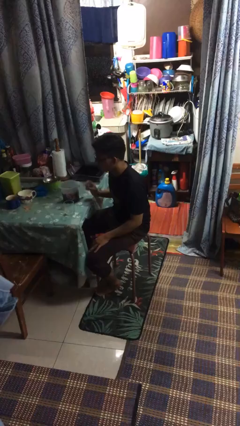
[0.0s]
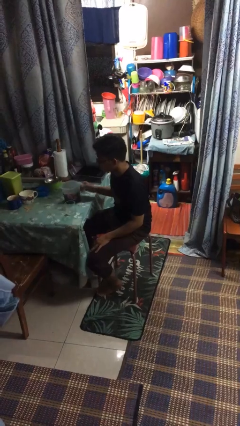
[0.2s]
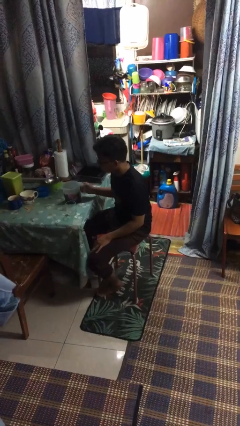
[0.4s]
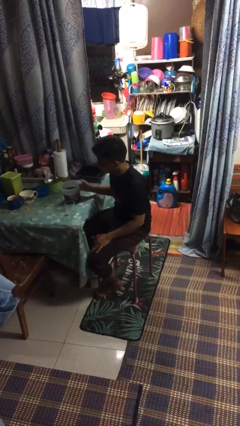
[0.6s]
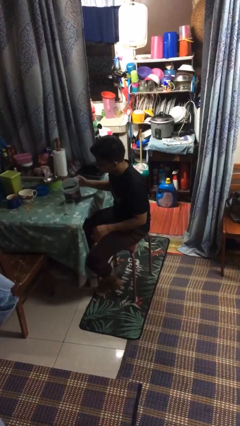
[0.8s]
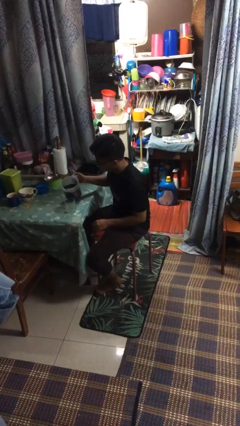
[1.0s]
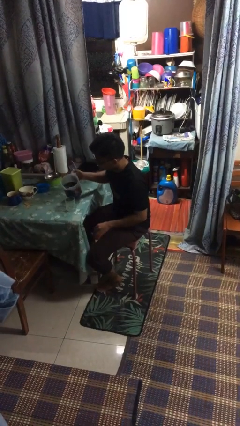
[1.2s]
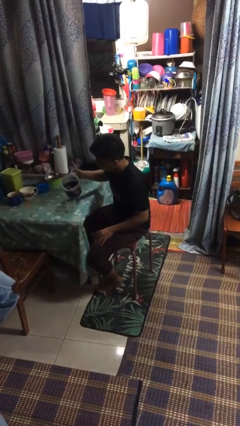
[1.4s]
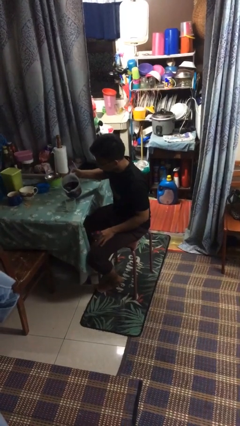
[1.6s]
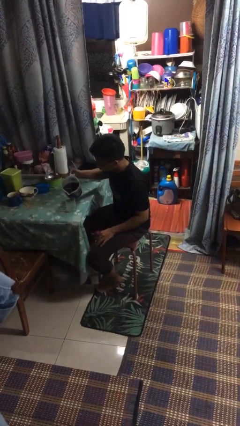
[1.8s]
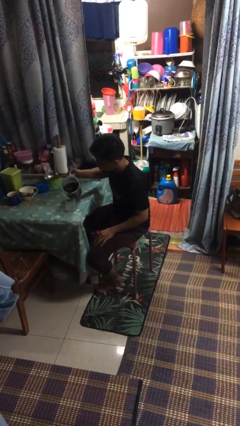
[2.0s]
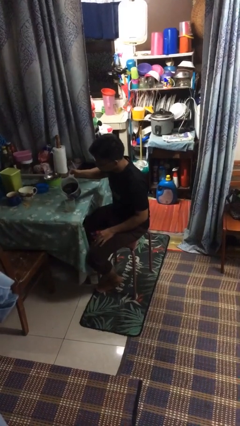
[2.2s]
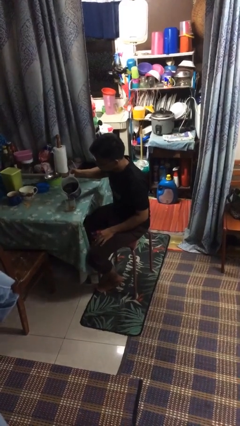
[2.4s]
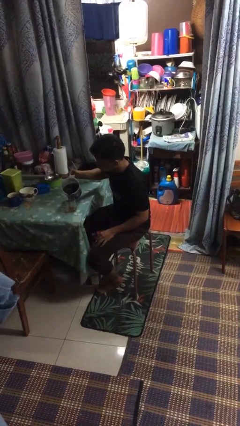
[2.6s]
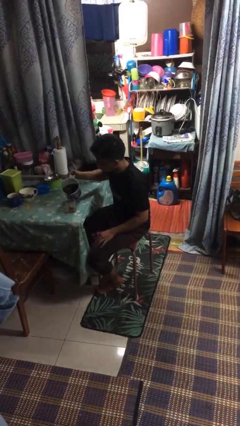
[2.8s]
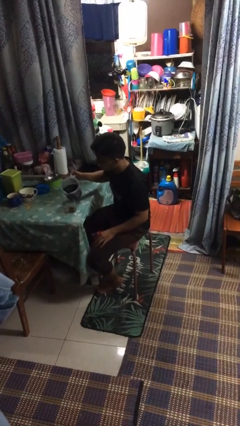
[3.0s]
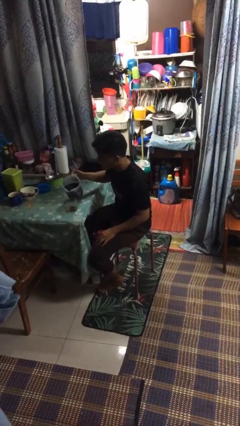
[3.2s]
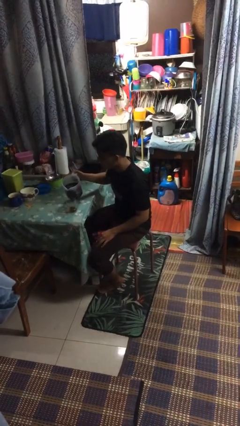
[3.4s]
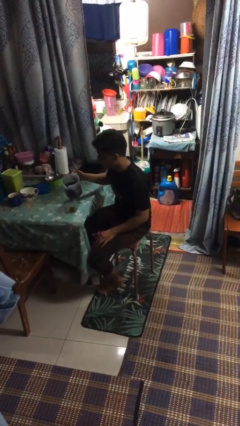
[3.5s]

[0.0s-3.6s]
person pours coffee into mug

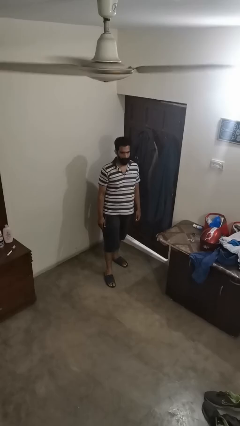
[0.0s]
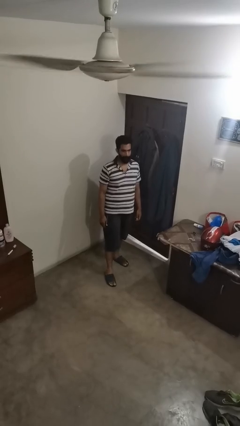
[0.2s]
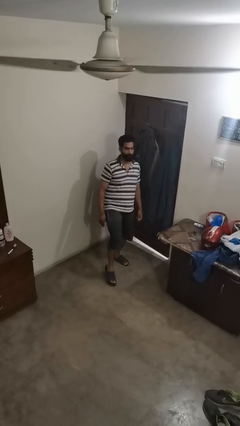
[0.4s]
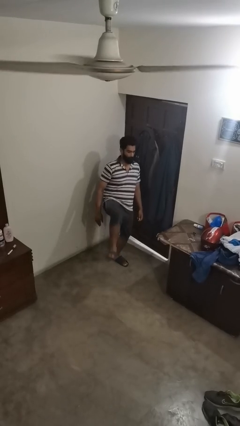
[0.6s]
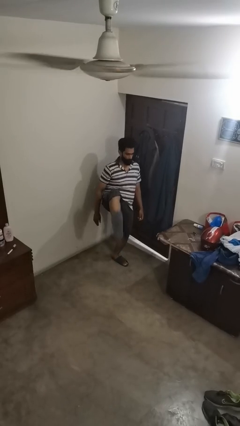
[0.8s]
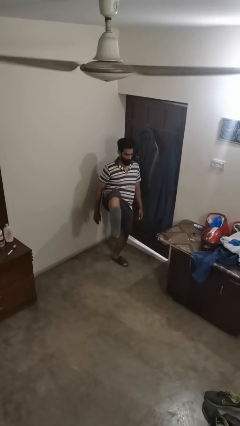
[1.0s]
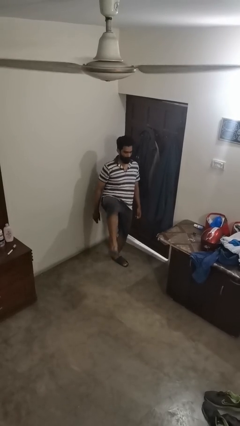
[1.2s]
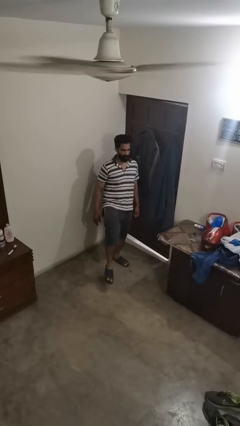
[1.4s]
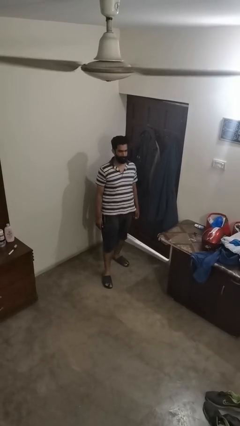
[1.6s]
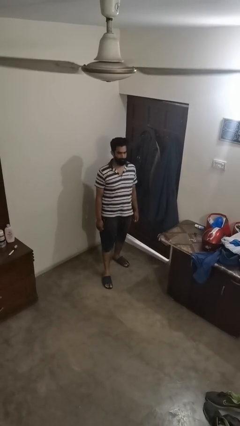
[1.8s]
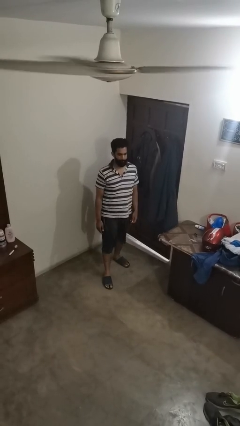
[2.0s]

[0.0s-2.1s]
person karate kicks

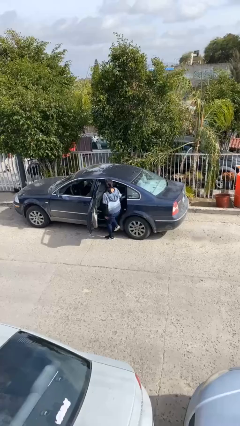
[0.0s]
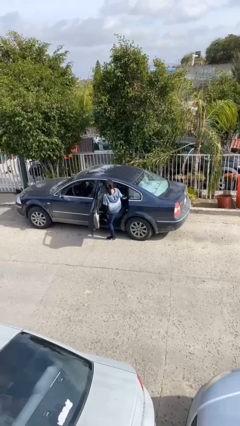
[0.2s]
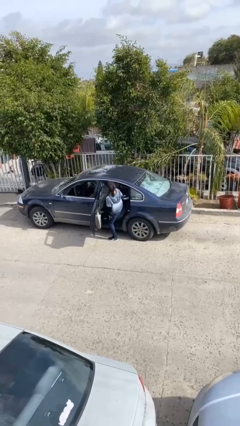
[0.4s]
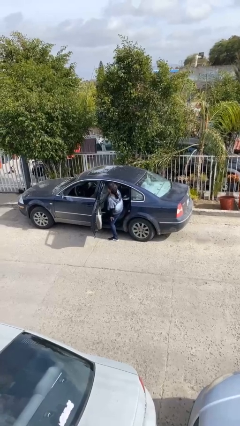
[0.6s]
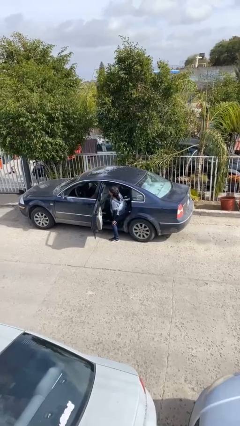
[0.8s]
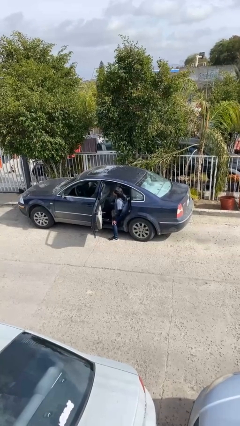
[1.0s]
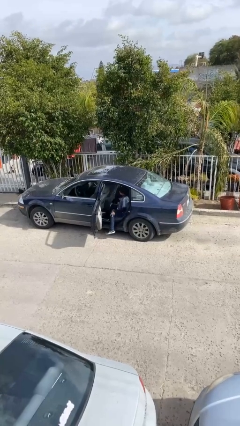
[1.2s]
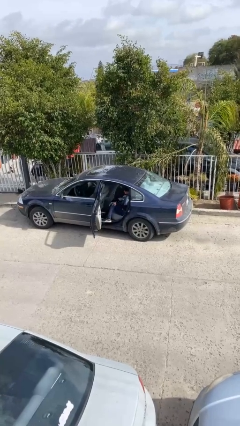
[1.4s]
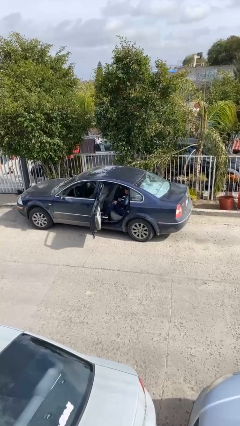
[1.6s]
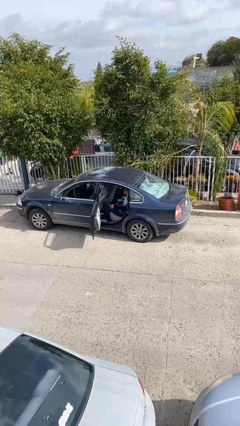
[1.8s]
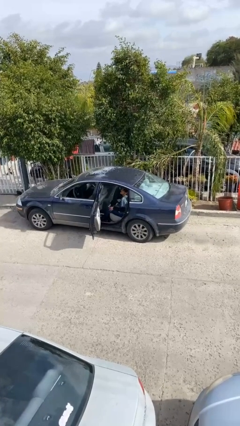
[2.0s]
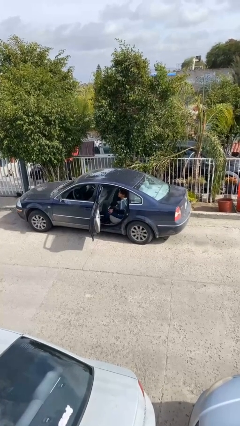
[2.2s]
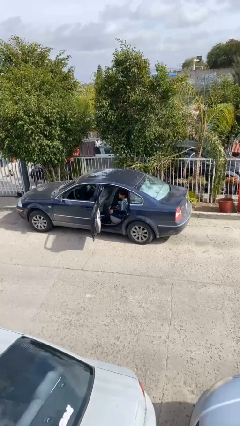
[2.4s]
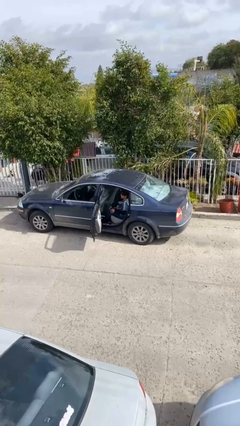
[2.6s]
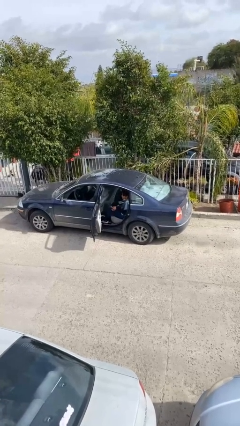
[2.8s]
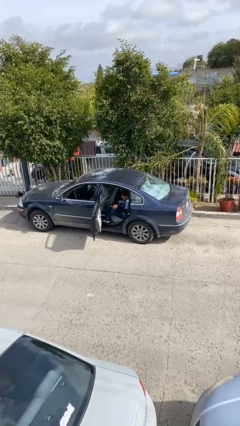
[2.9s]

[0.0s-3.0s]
person enters car

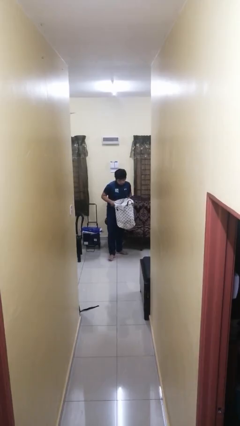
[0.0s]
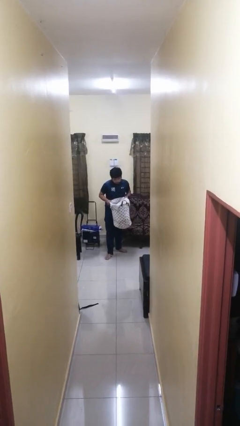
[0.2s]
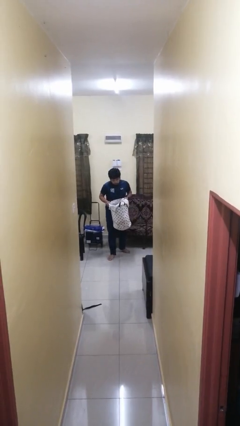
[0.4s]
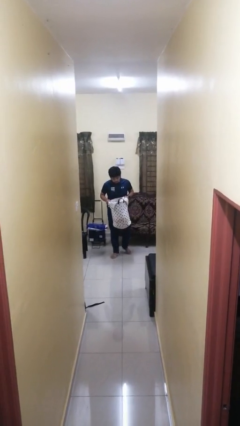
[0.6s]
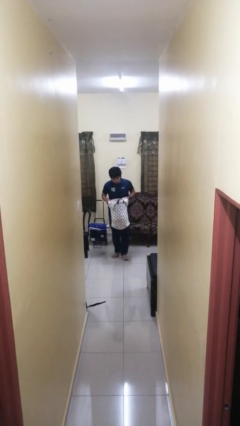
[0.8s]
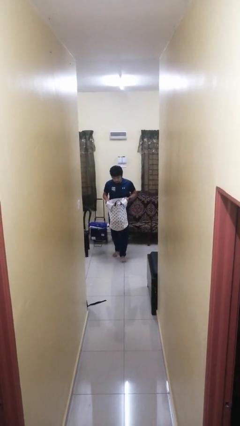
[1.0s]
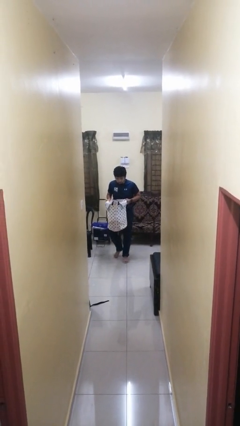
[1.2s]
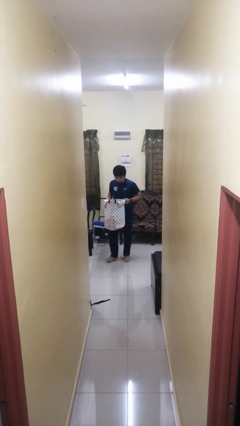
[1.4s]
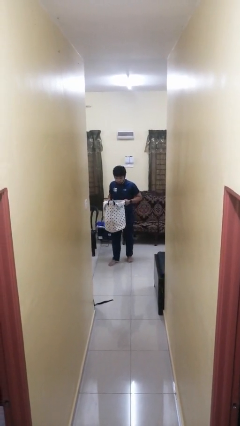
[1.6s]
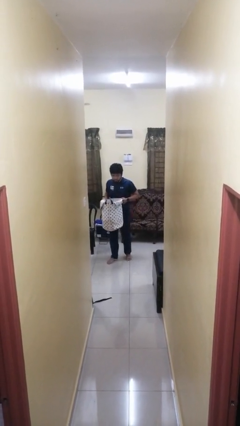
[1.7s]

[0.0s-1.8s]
person carries laundry basket

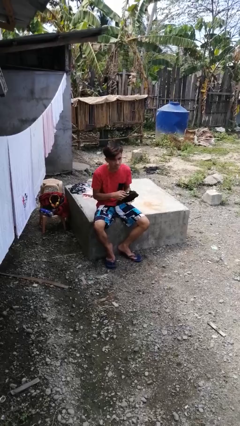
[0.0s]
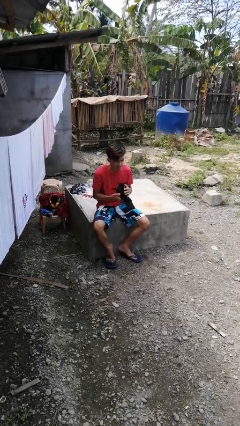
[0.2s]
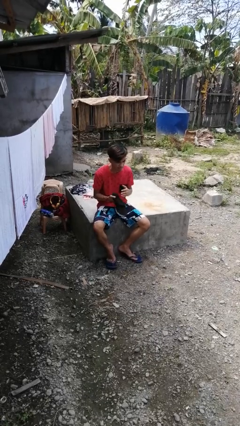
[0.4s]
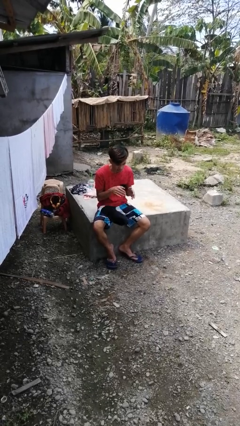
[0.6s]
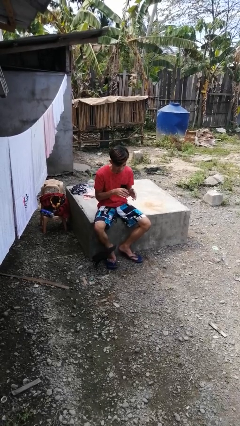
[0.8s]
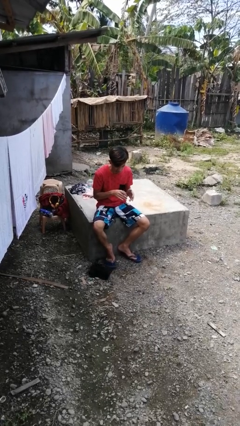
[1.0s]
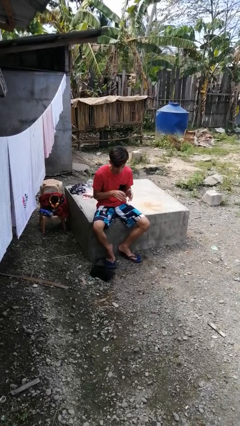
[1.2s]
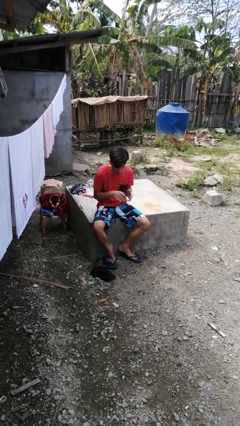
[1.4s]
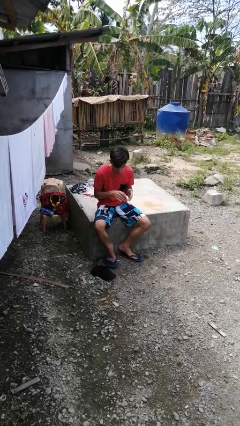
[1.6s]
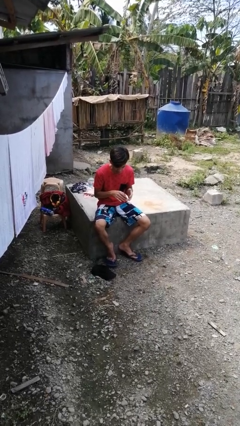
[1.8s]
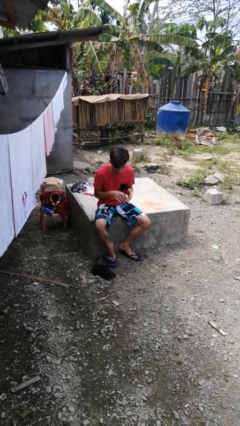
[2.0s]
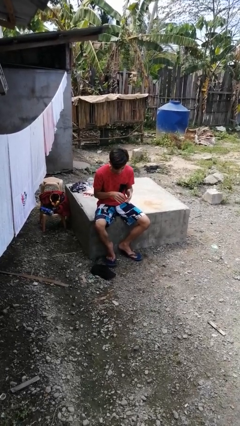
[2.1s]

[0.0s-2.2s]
person drops object

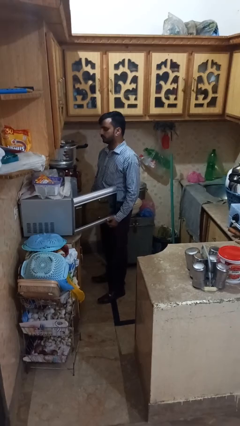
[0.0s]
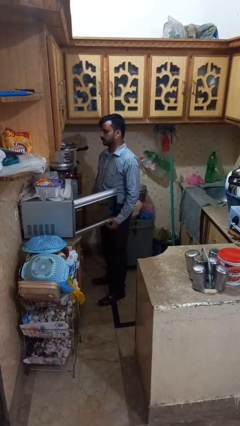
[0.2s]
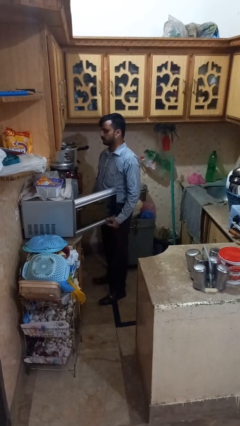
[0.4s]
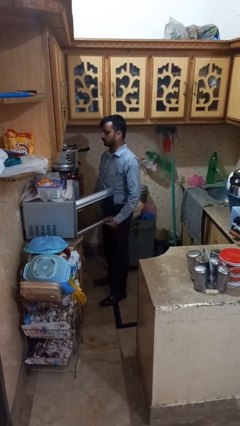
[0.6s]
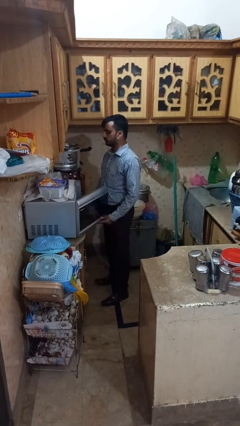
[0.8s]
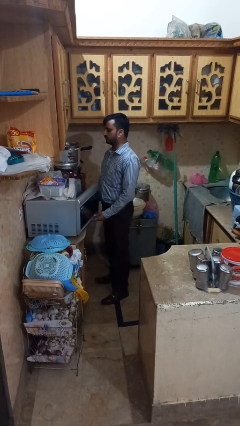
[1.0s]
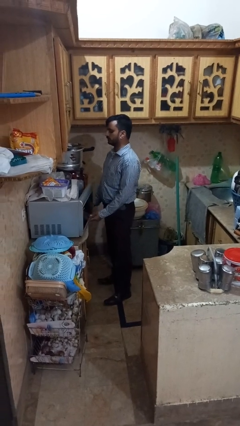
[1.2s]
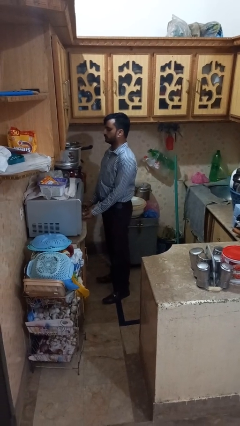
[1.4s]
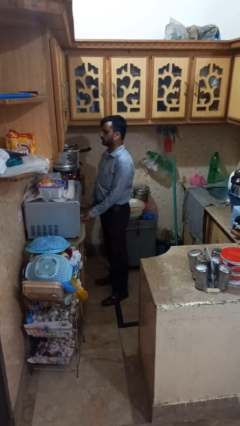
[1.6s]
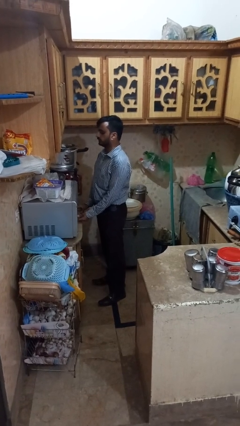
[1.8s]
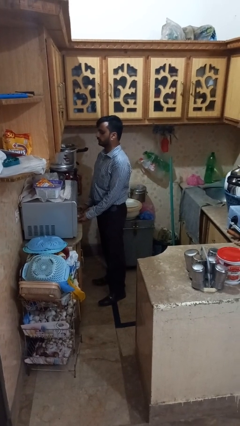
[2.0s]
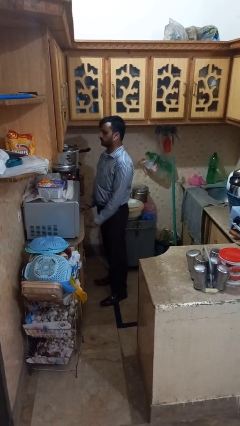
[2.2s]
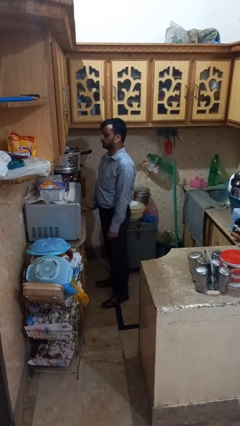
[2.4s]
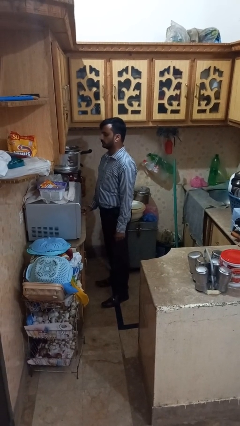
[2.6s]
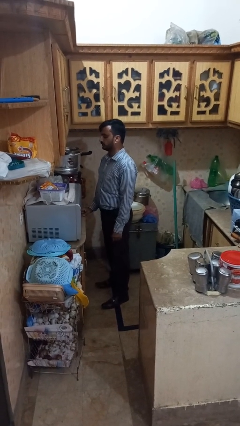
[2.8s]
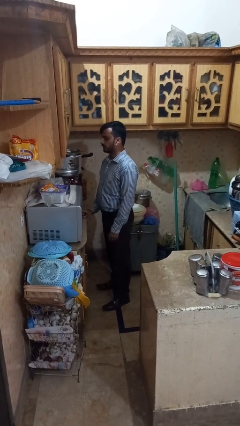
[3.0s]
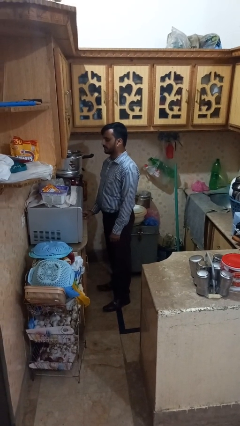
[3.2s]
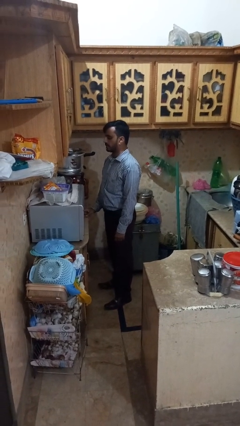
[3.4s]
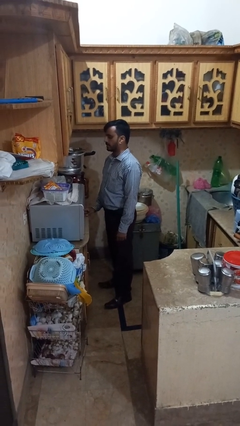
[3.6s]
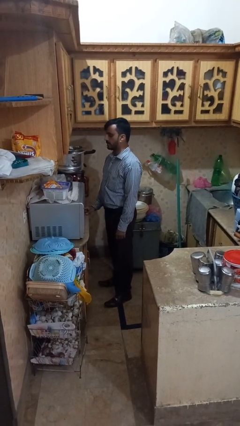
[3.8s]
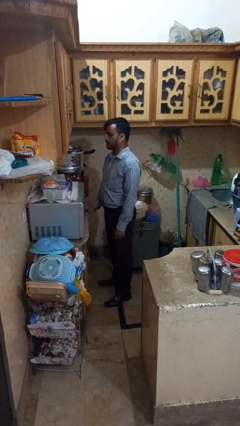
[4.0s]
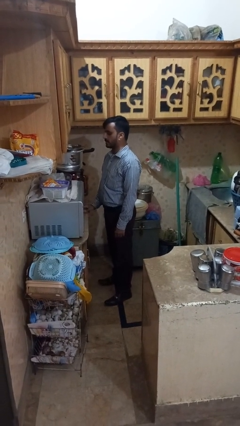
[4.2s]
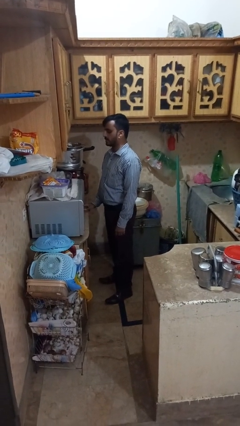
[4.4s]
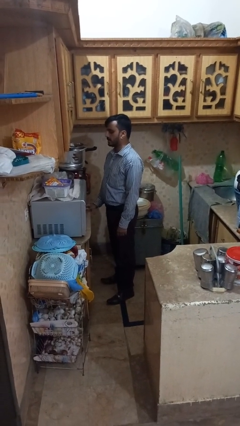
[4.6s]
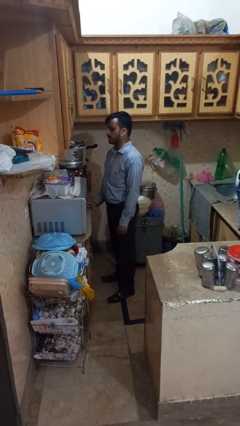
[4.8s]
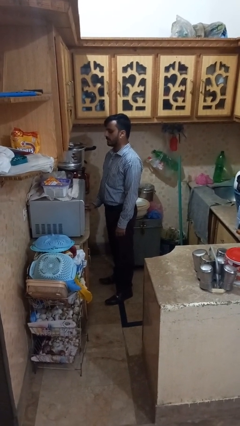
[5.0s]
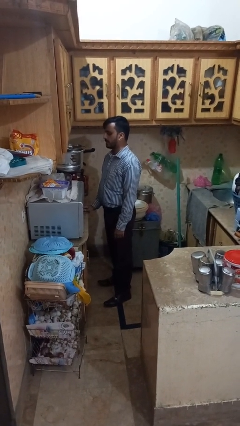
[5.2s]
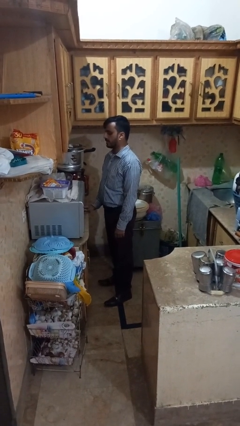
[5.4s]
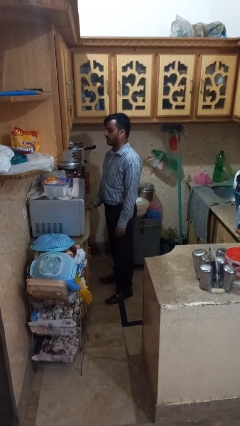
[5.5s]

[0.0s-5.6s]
person closes microwave
